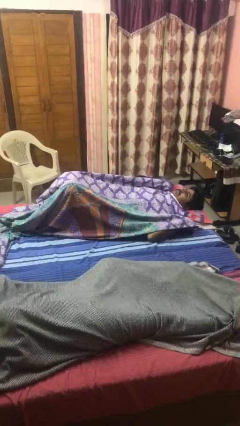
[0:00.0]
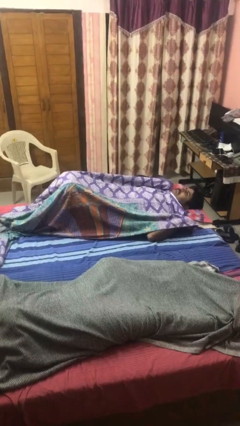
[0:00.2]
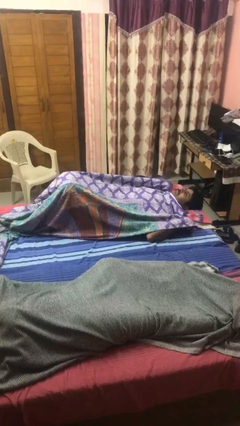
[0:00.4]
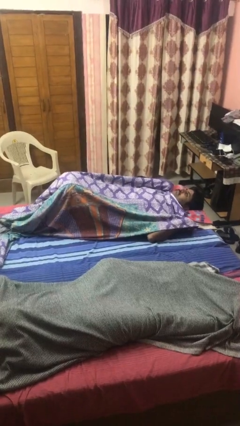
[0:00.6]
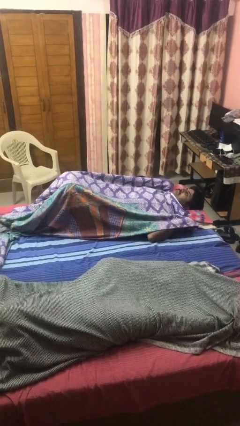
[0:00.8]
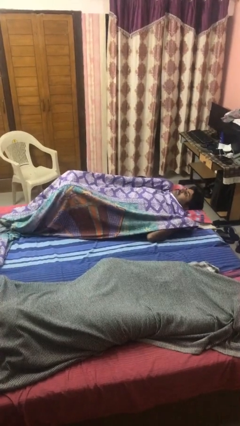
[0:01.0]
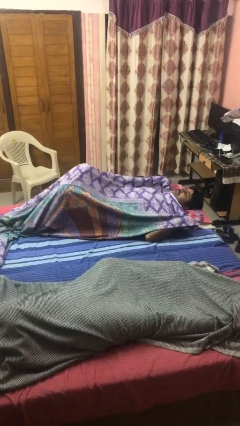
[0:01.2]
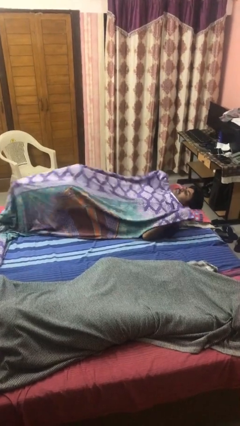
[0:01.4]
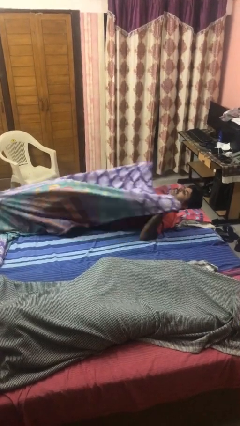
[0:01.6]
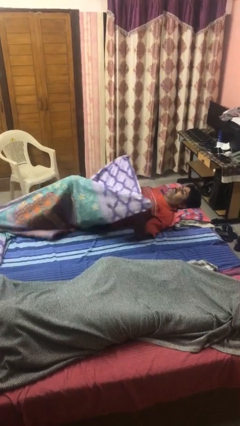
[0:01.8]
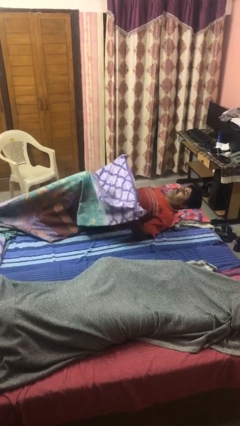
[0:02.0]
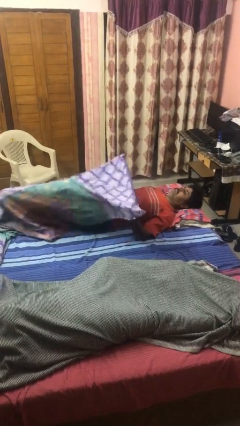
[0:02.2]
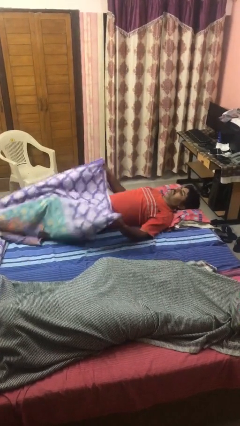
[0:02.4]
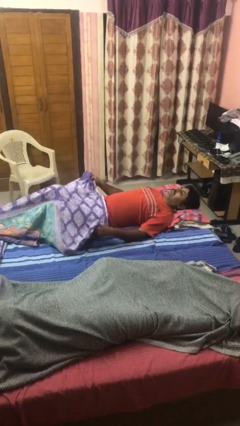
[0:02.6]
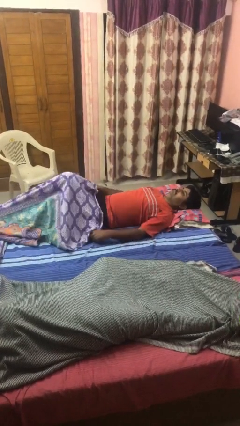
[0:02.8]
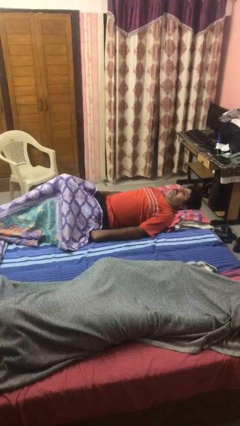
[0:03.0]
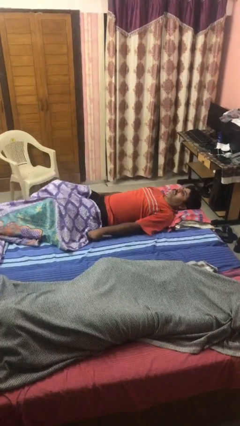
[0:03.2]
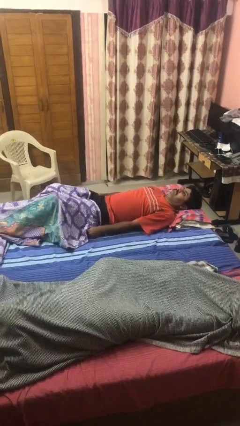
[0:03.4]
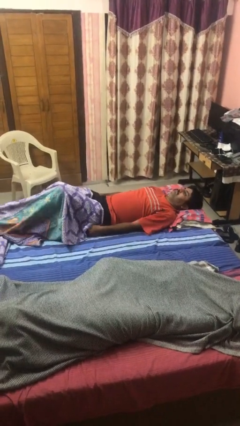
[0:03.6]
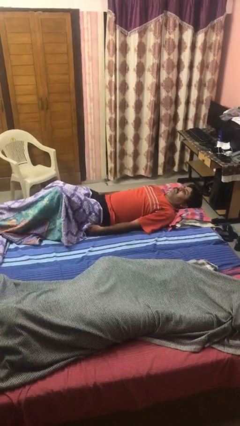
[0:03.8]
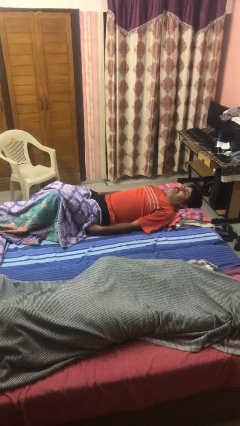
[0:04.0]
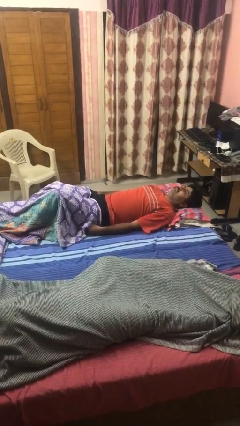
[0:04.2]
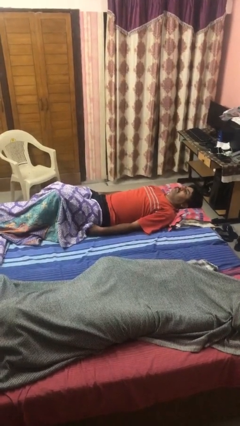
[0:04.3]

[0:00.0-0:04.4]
person uncovers with bedsheets

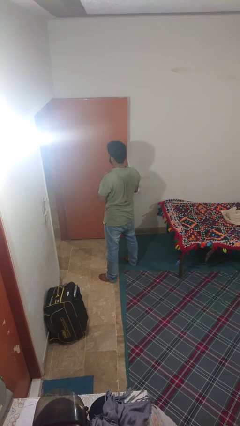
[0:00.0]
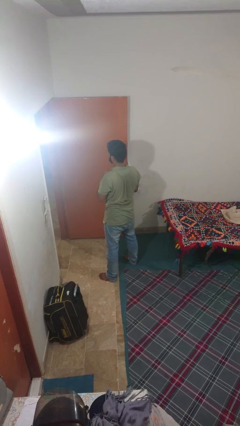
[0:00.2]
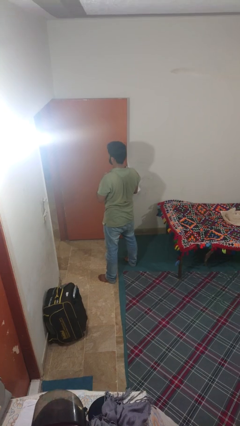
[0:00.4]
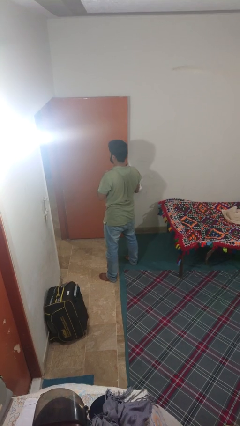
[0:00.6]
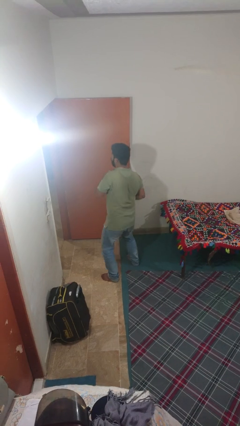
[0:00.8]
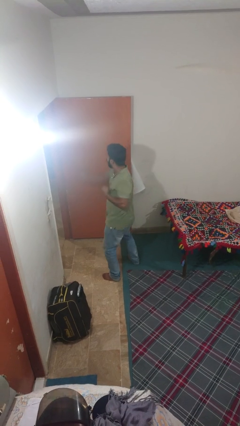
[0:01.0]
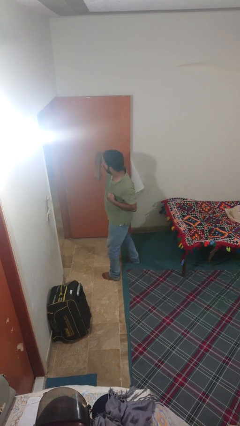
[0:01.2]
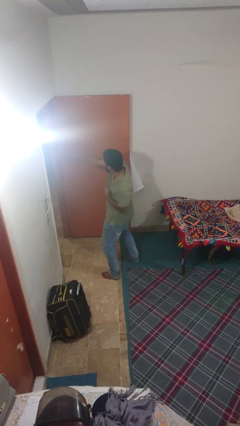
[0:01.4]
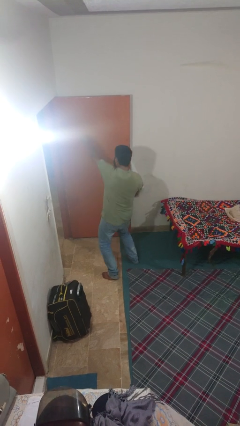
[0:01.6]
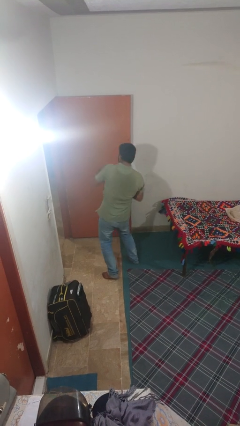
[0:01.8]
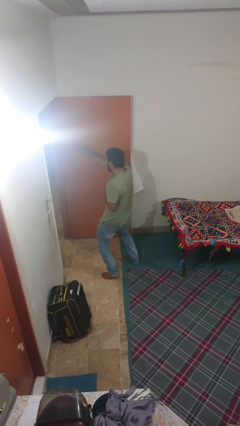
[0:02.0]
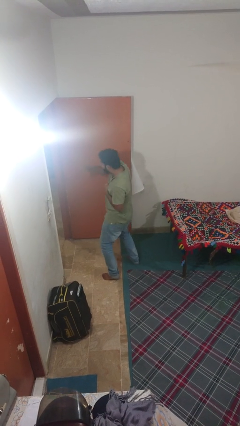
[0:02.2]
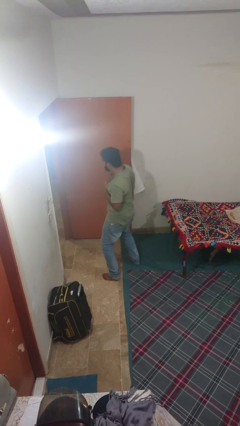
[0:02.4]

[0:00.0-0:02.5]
person punches

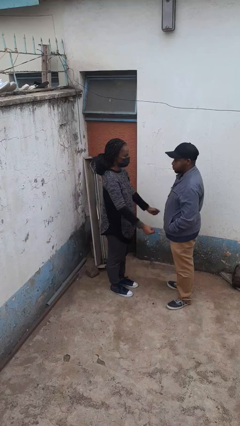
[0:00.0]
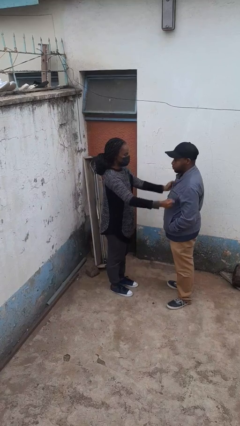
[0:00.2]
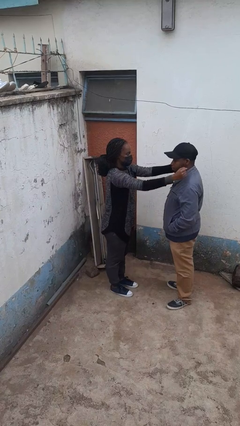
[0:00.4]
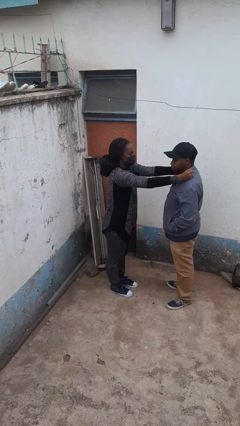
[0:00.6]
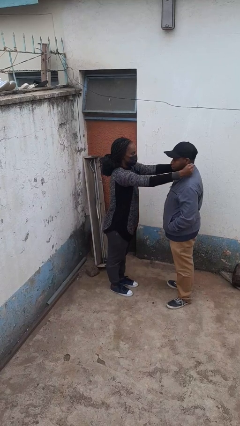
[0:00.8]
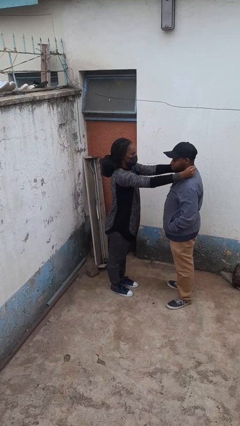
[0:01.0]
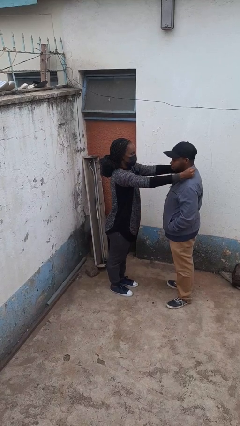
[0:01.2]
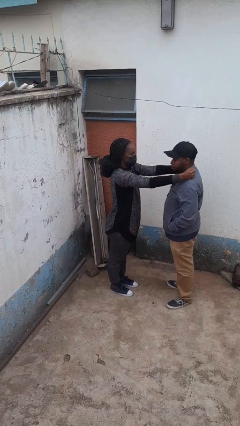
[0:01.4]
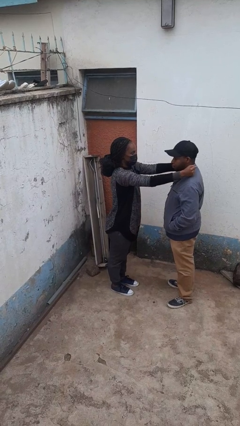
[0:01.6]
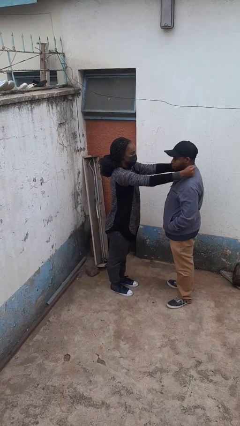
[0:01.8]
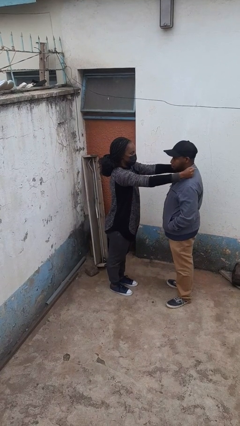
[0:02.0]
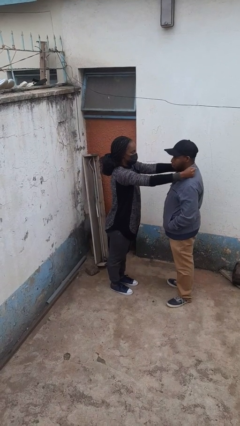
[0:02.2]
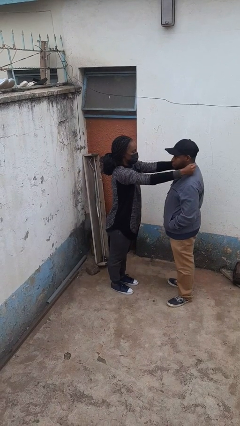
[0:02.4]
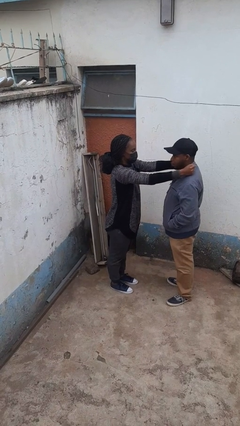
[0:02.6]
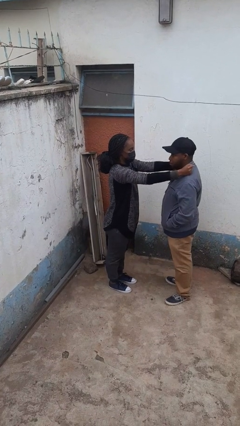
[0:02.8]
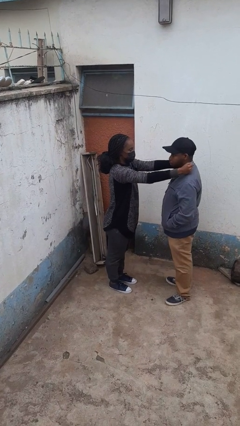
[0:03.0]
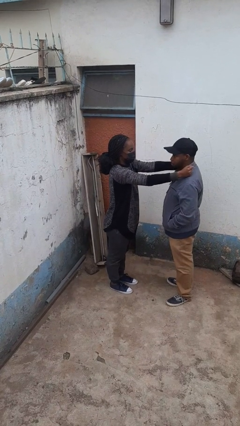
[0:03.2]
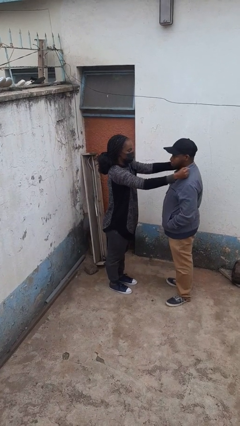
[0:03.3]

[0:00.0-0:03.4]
person pounds shoulders of person

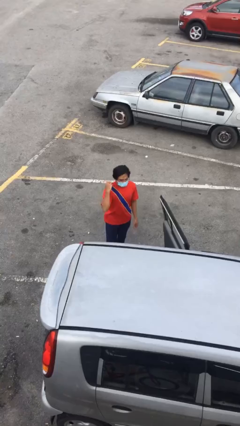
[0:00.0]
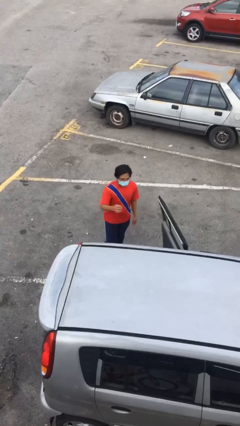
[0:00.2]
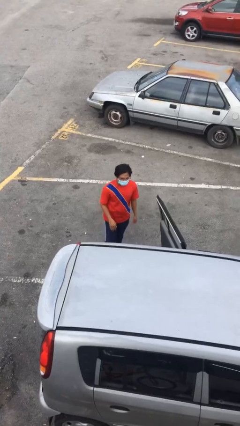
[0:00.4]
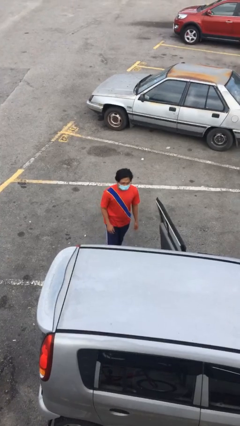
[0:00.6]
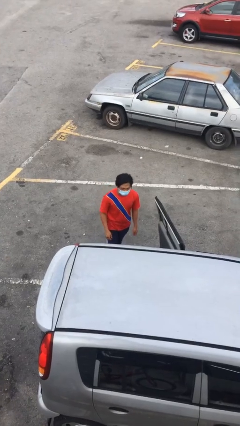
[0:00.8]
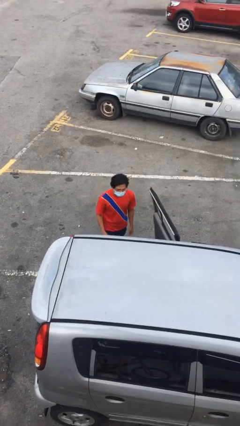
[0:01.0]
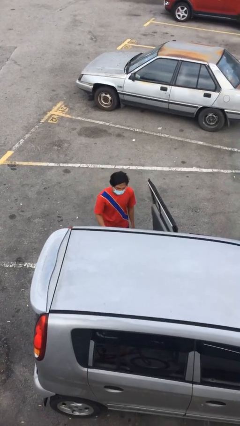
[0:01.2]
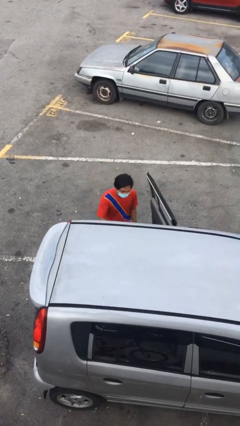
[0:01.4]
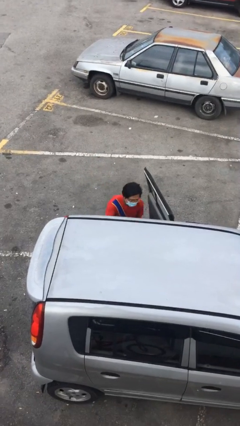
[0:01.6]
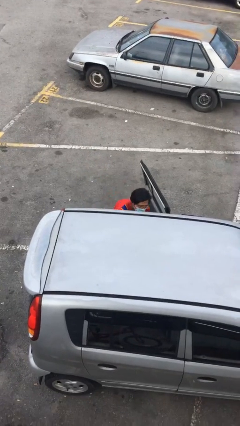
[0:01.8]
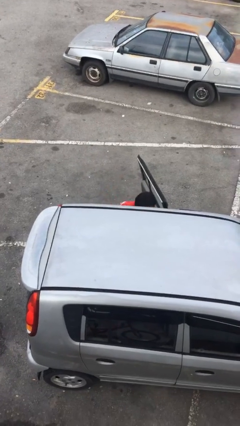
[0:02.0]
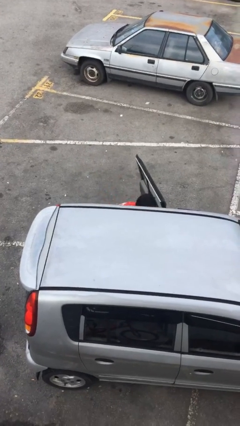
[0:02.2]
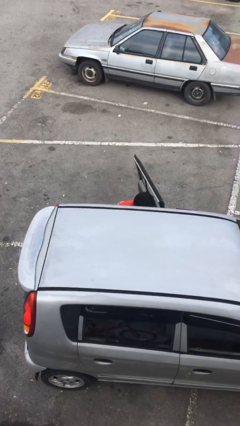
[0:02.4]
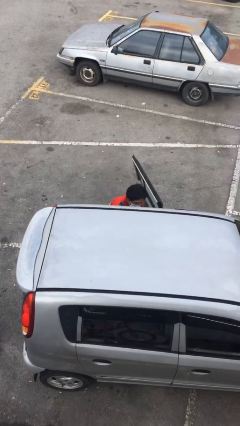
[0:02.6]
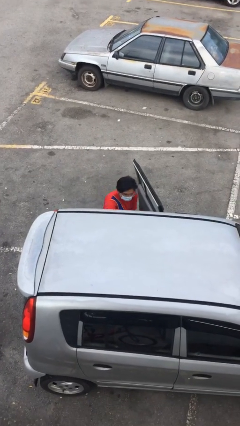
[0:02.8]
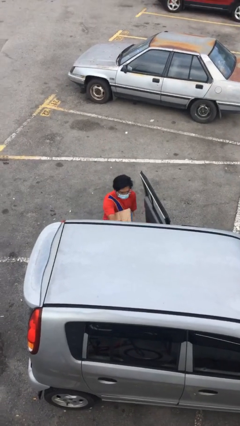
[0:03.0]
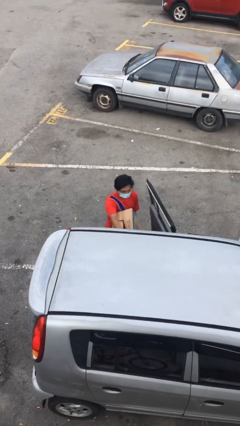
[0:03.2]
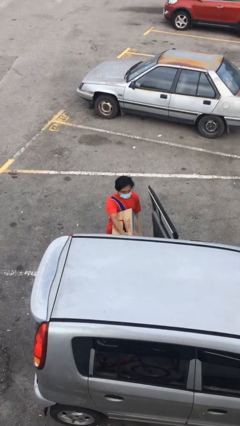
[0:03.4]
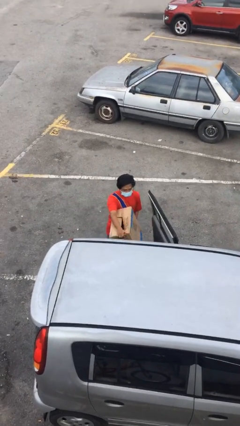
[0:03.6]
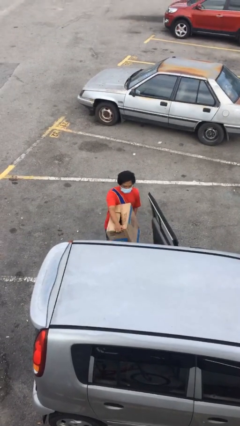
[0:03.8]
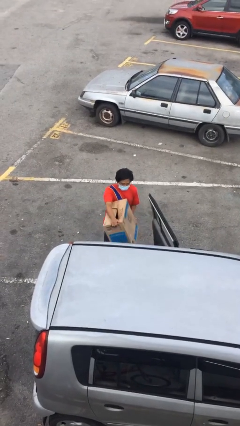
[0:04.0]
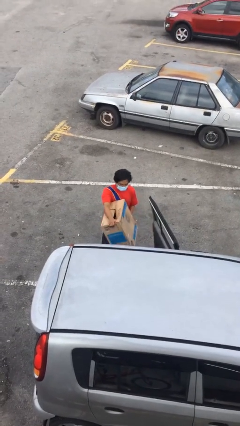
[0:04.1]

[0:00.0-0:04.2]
person unloads car

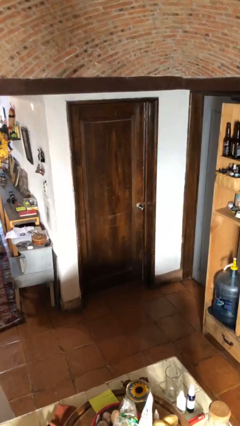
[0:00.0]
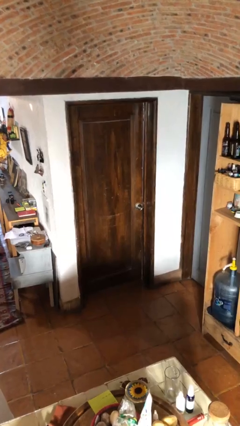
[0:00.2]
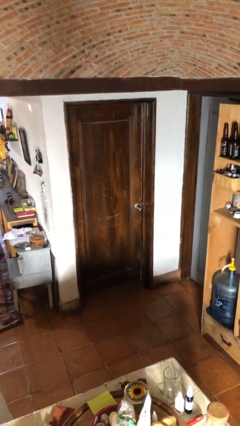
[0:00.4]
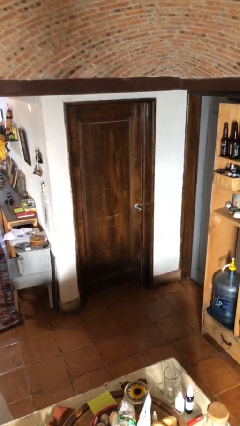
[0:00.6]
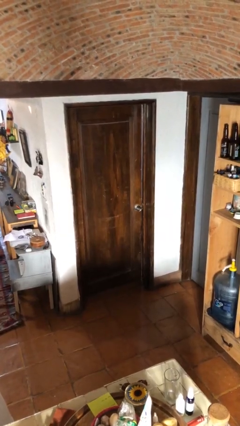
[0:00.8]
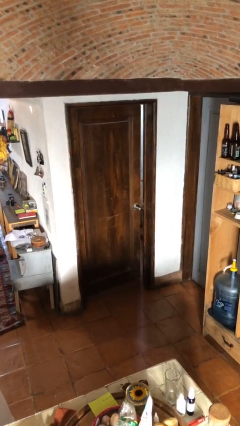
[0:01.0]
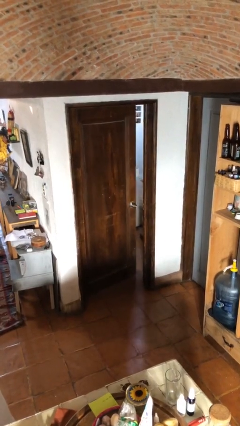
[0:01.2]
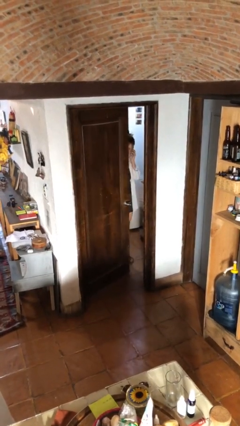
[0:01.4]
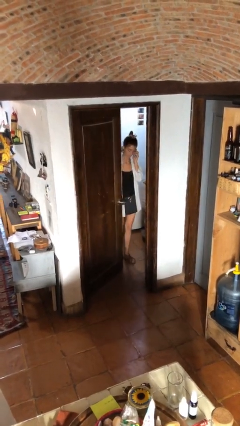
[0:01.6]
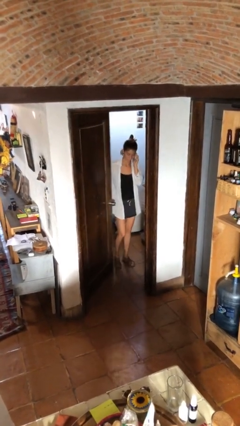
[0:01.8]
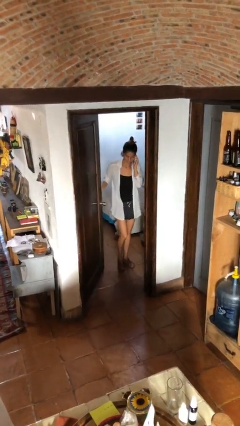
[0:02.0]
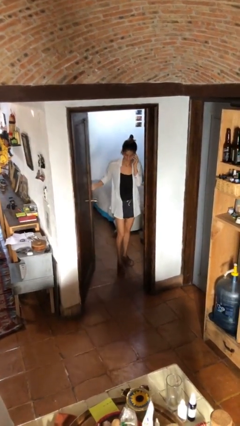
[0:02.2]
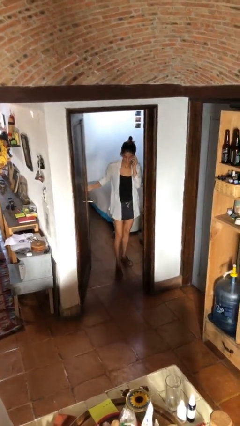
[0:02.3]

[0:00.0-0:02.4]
person opens facility door

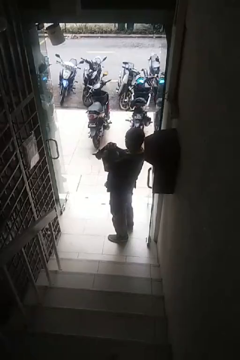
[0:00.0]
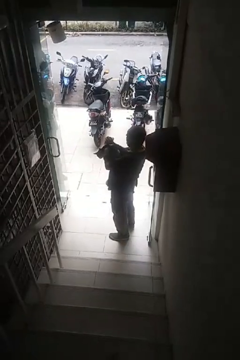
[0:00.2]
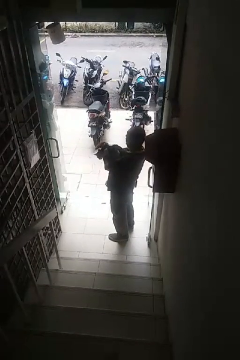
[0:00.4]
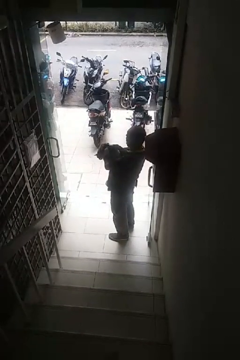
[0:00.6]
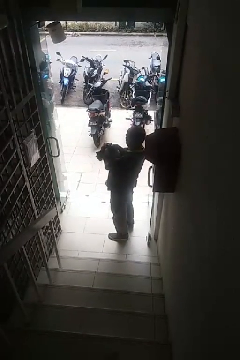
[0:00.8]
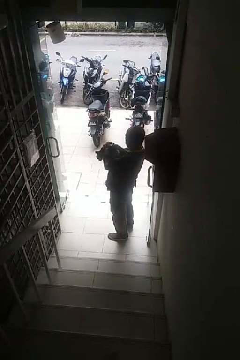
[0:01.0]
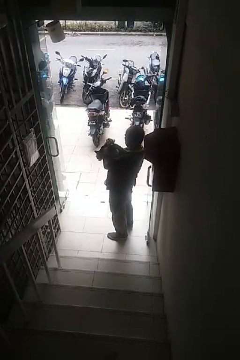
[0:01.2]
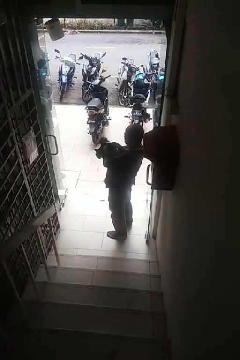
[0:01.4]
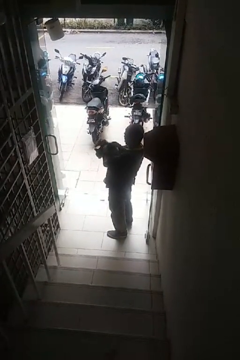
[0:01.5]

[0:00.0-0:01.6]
person hugs cat
